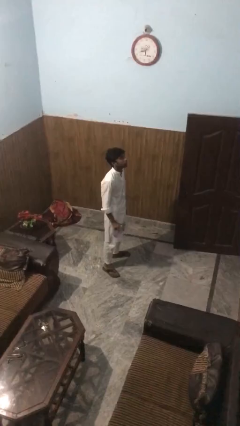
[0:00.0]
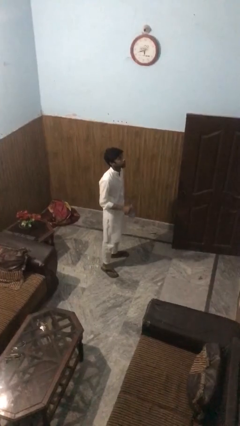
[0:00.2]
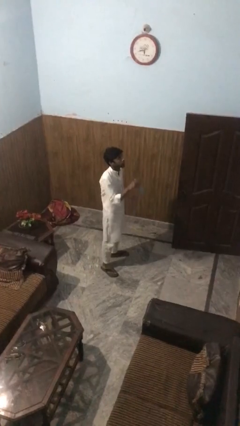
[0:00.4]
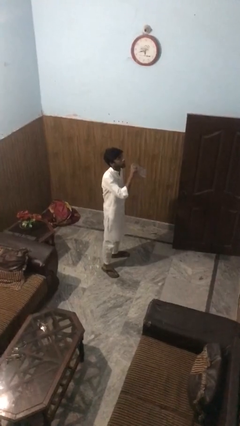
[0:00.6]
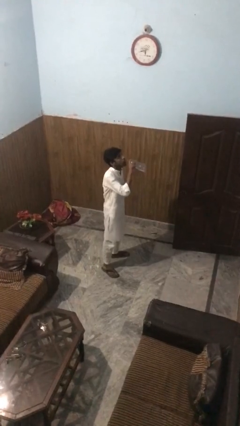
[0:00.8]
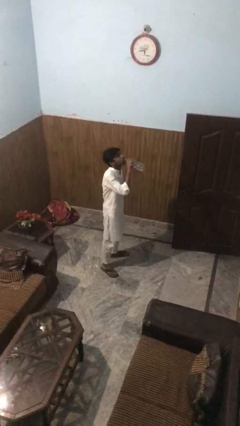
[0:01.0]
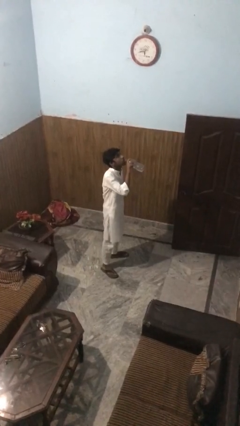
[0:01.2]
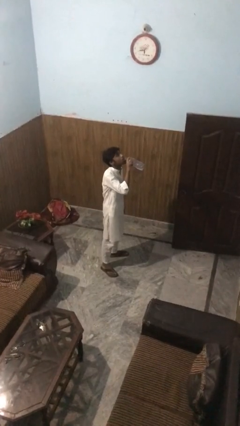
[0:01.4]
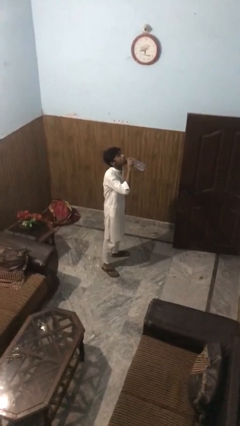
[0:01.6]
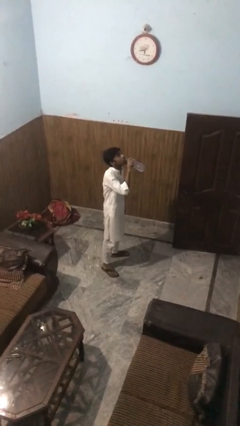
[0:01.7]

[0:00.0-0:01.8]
person drinks from bottle

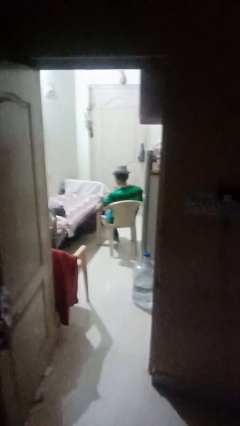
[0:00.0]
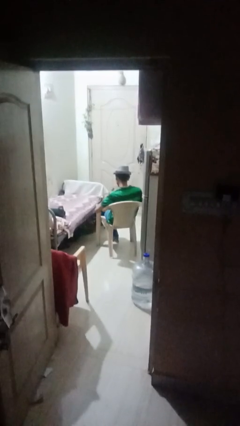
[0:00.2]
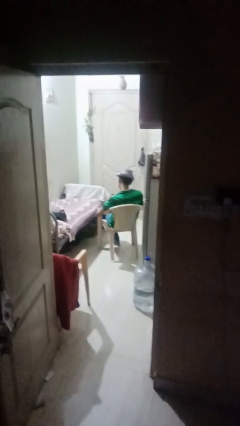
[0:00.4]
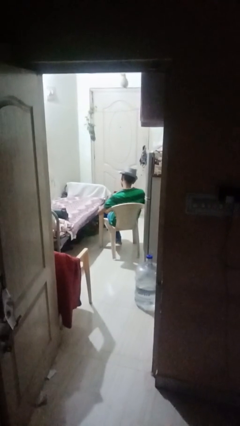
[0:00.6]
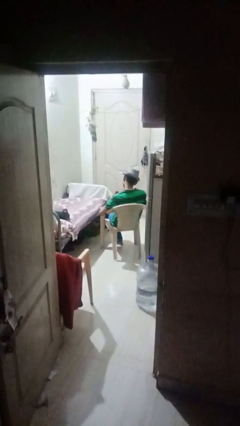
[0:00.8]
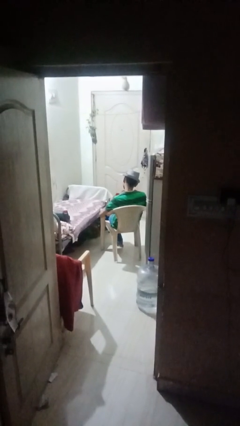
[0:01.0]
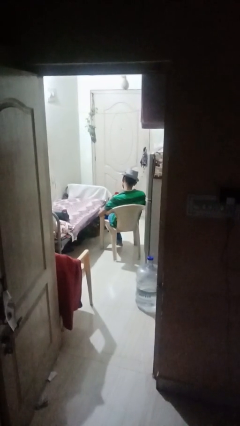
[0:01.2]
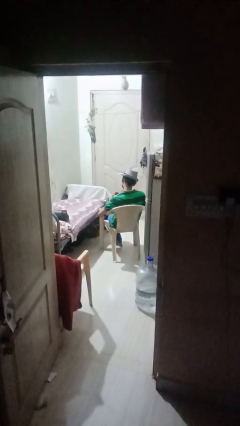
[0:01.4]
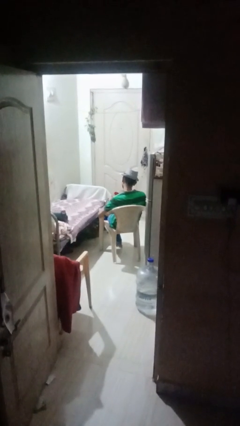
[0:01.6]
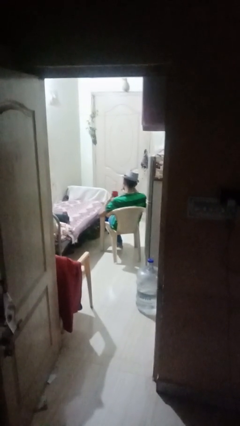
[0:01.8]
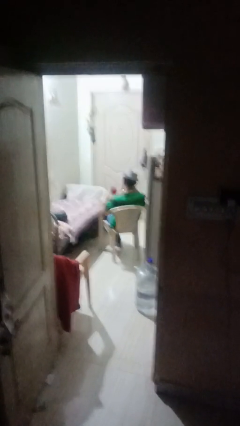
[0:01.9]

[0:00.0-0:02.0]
person stirs mug

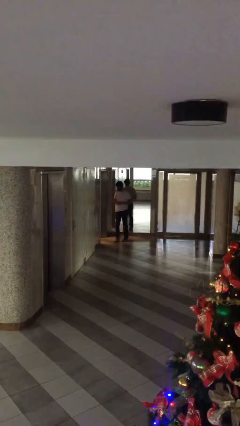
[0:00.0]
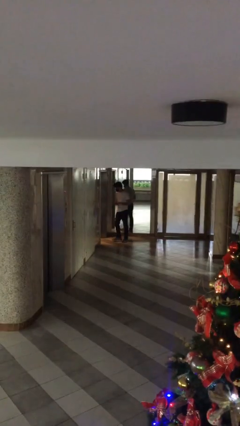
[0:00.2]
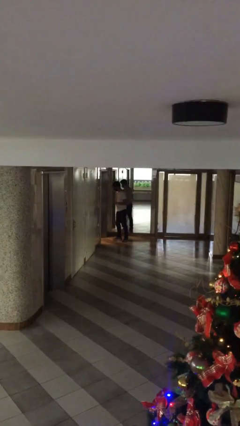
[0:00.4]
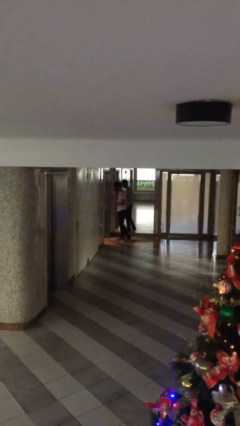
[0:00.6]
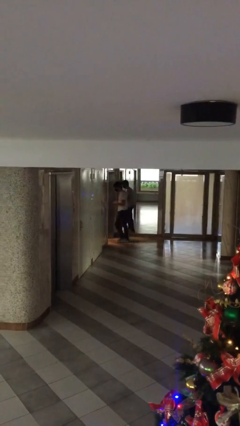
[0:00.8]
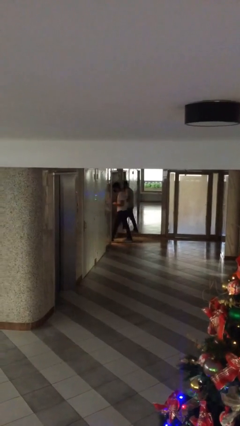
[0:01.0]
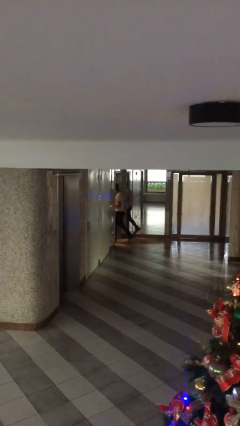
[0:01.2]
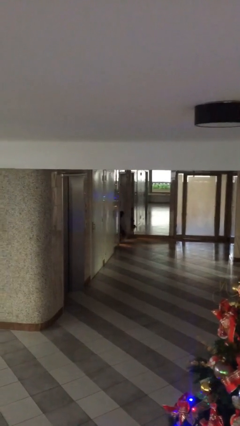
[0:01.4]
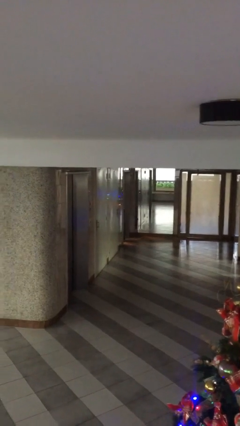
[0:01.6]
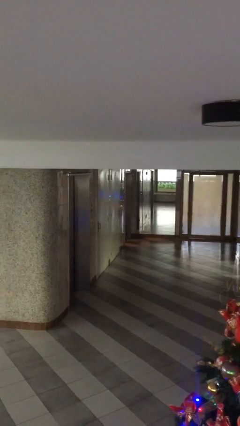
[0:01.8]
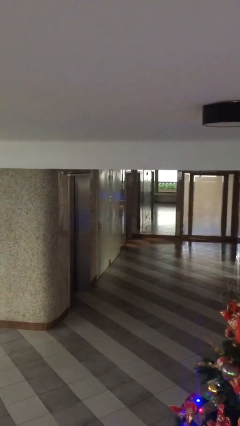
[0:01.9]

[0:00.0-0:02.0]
person exits scene through structure

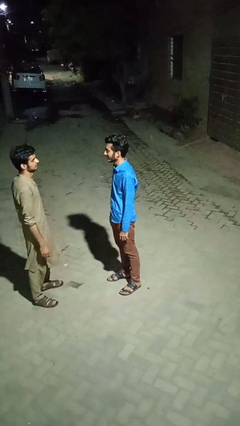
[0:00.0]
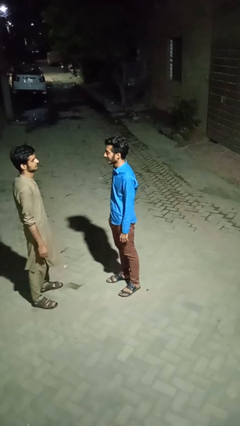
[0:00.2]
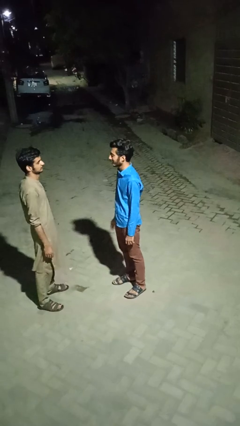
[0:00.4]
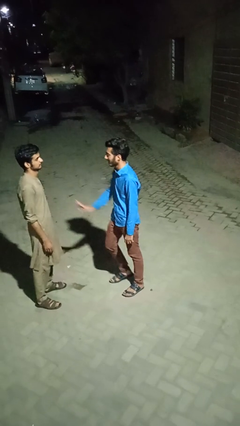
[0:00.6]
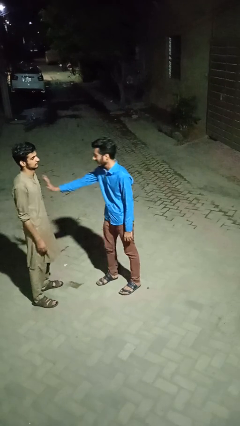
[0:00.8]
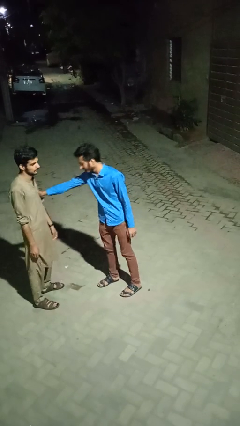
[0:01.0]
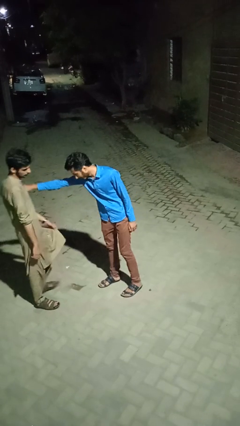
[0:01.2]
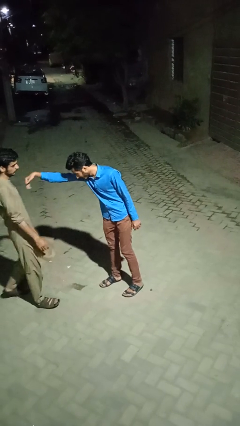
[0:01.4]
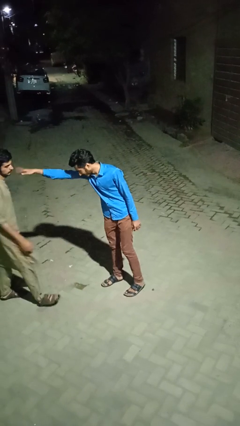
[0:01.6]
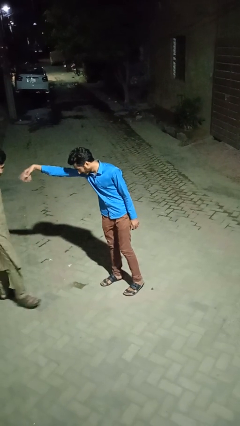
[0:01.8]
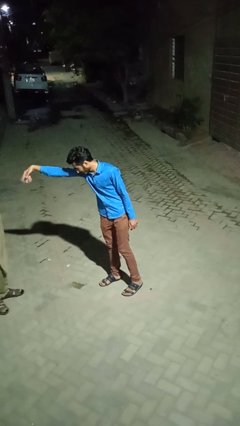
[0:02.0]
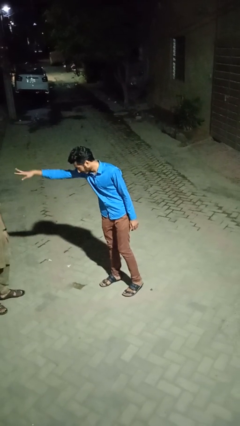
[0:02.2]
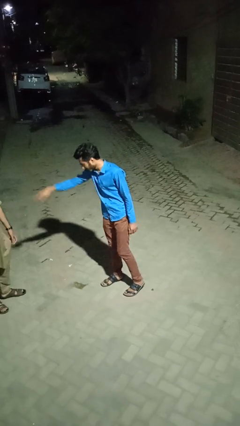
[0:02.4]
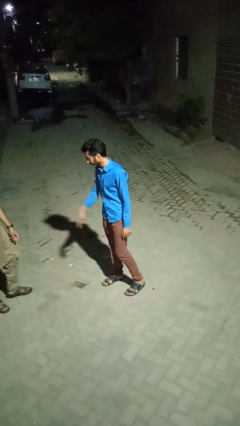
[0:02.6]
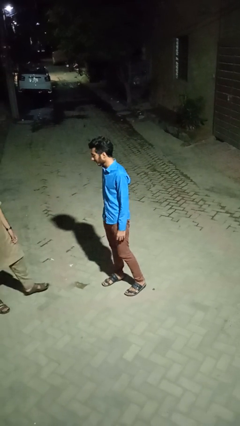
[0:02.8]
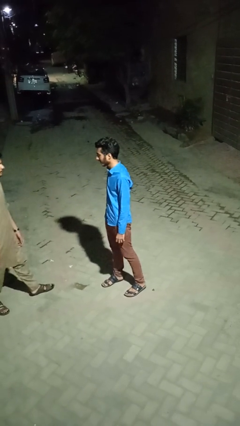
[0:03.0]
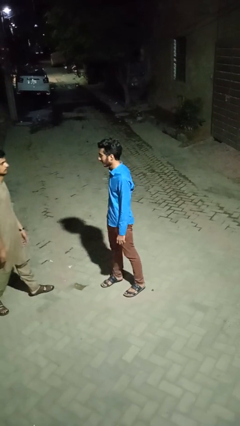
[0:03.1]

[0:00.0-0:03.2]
person shoves person

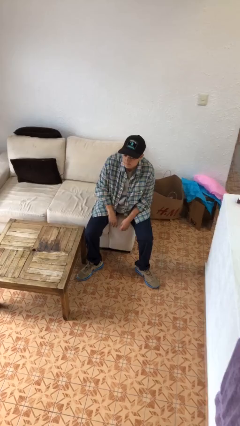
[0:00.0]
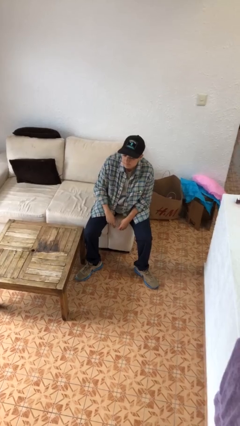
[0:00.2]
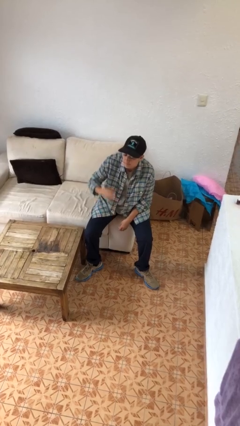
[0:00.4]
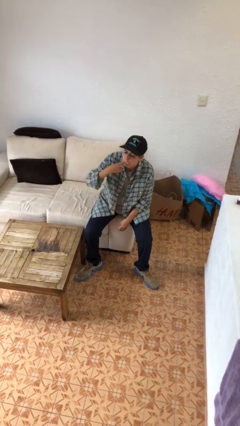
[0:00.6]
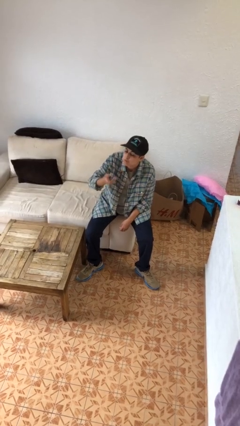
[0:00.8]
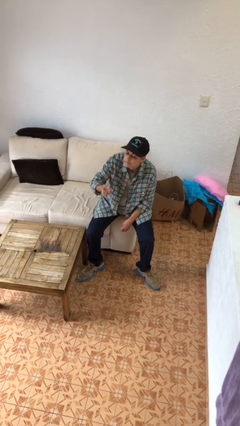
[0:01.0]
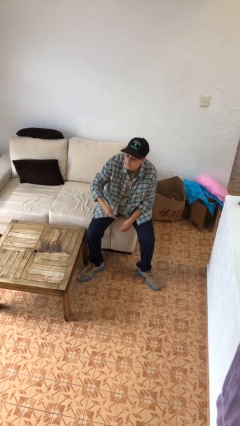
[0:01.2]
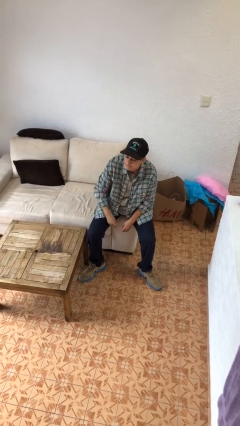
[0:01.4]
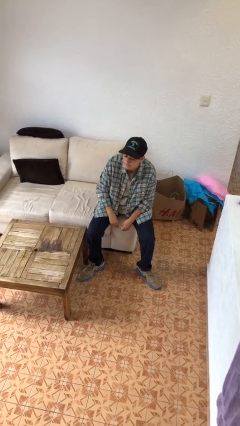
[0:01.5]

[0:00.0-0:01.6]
person gestures blow kiss

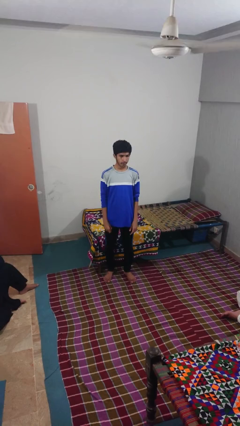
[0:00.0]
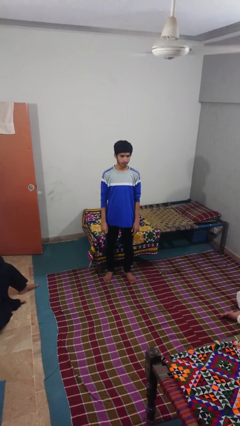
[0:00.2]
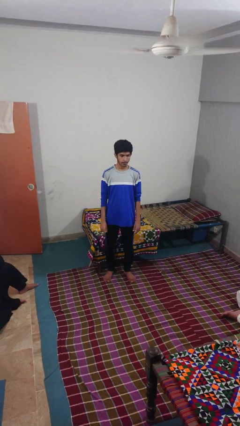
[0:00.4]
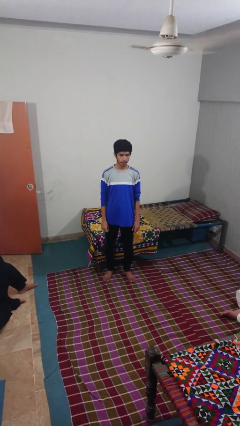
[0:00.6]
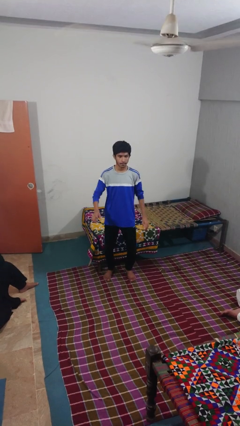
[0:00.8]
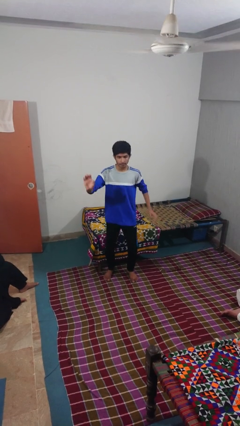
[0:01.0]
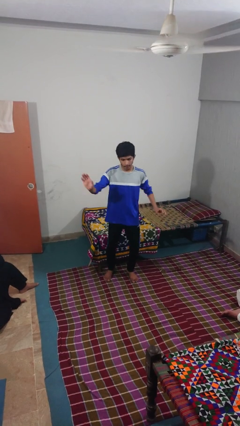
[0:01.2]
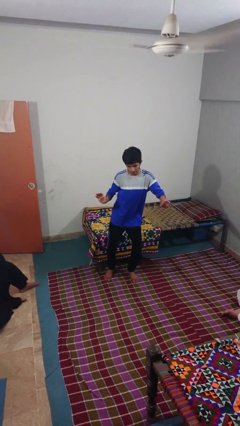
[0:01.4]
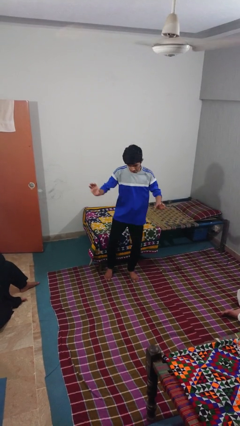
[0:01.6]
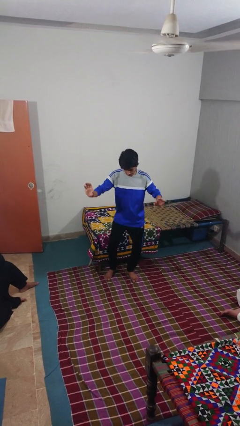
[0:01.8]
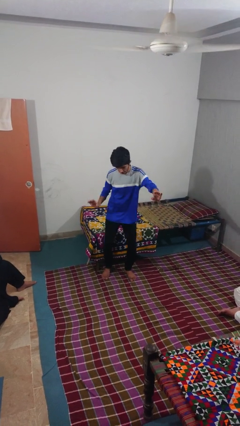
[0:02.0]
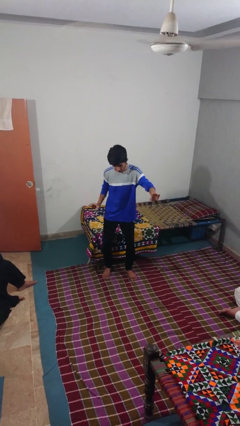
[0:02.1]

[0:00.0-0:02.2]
person dances in place

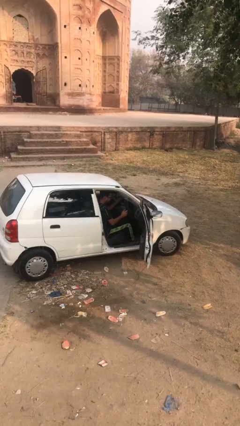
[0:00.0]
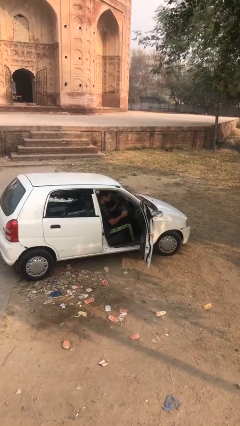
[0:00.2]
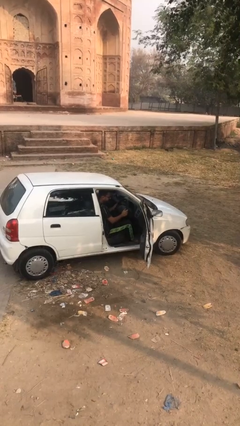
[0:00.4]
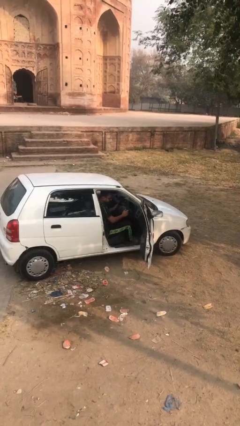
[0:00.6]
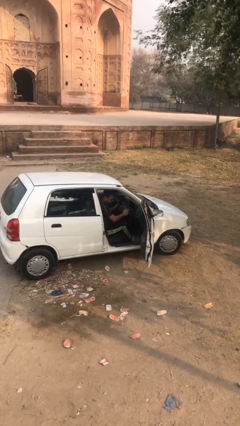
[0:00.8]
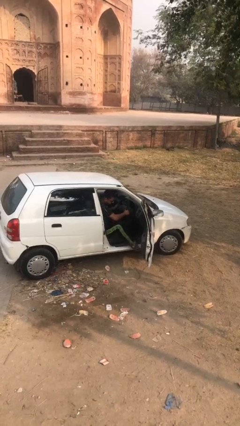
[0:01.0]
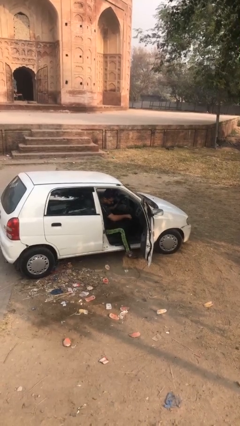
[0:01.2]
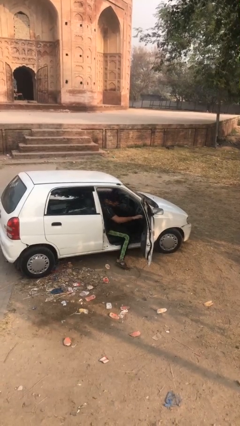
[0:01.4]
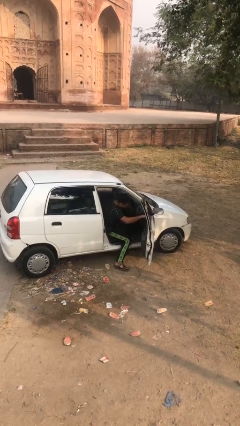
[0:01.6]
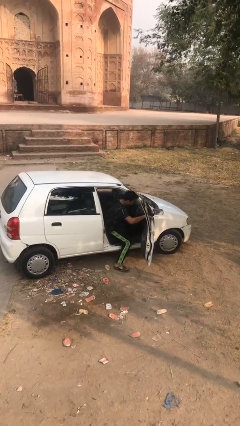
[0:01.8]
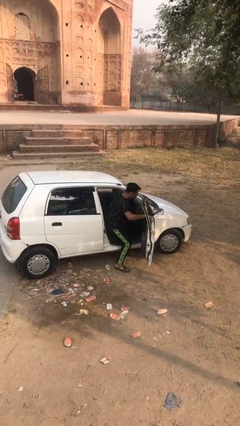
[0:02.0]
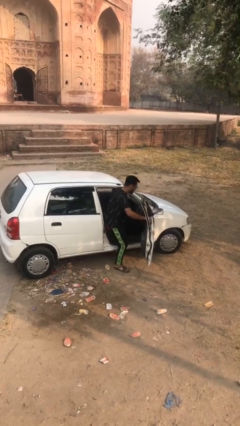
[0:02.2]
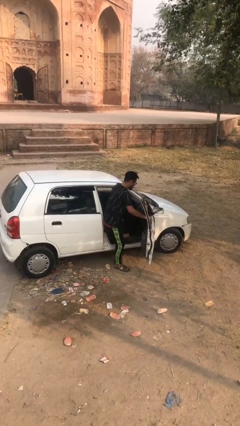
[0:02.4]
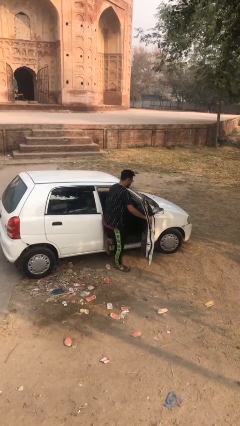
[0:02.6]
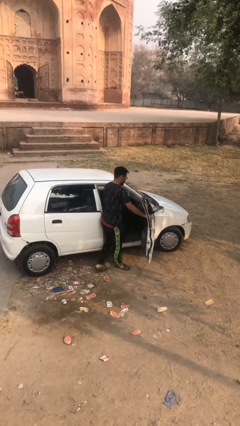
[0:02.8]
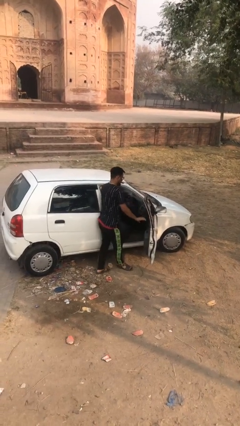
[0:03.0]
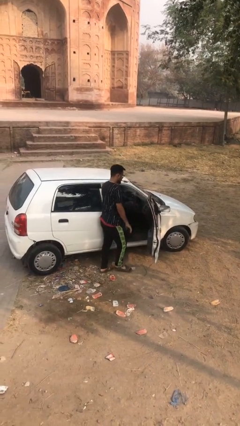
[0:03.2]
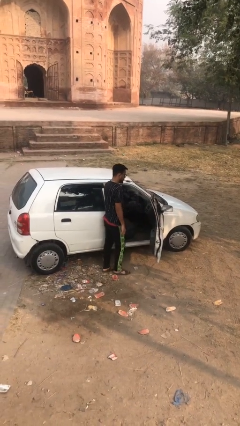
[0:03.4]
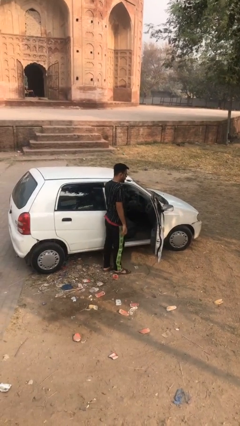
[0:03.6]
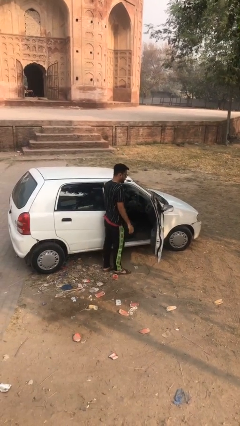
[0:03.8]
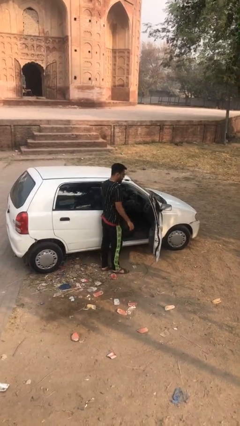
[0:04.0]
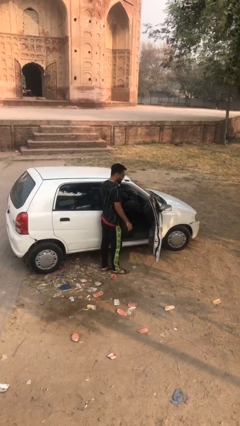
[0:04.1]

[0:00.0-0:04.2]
person exits car
